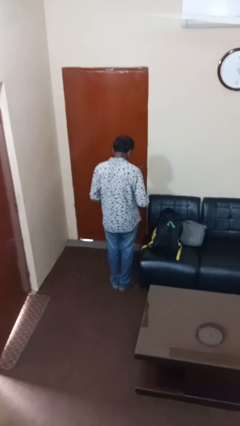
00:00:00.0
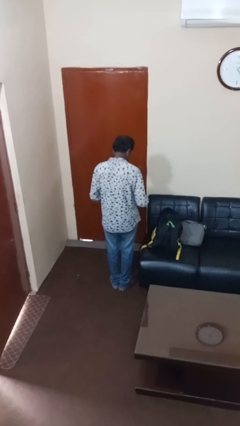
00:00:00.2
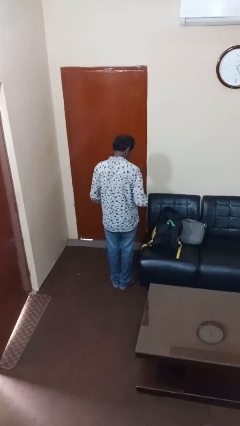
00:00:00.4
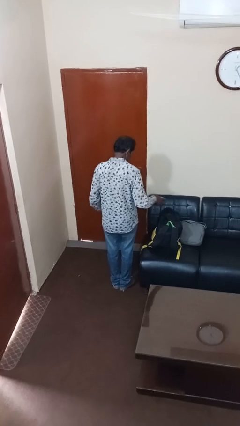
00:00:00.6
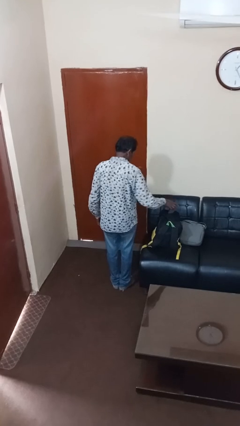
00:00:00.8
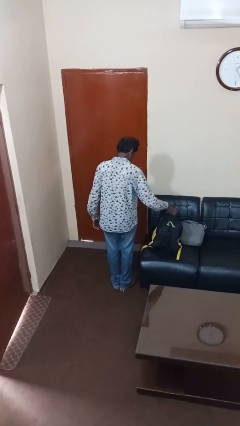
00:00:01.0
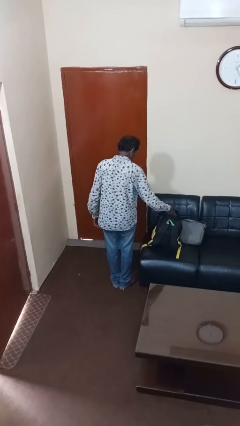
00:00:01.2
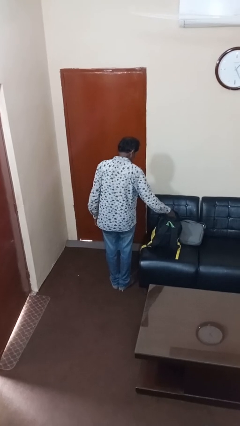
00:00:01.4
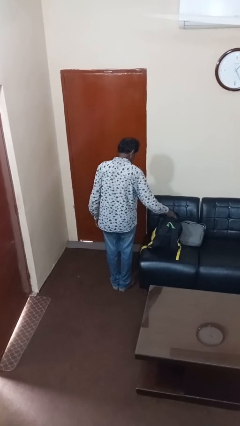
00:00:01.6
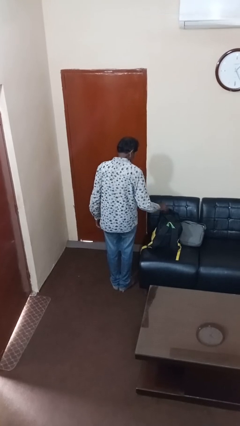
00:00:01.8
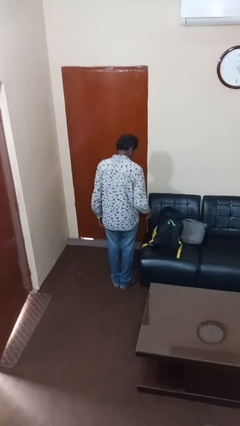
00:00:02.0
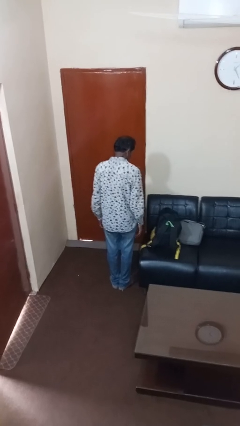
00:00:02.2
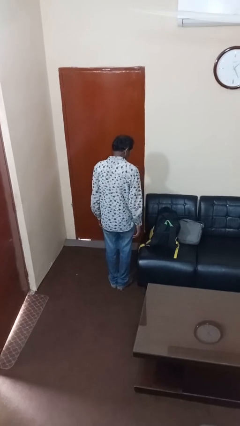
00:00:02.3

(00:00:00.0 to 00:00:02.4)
person puts object into backpack

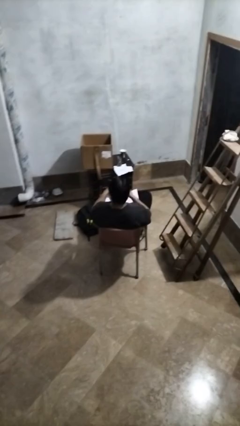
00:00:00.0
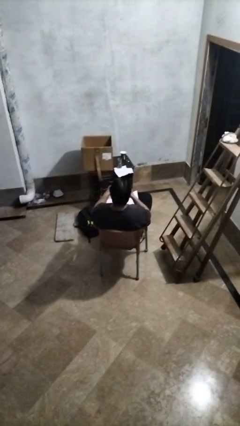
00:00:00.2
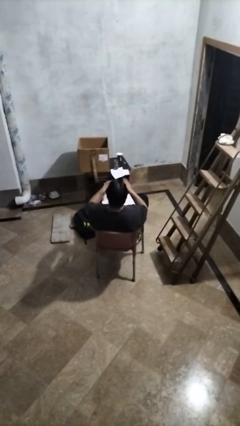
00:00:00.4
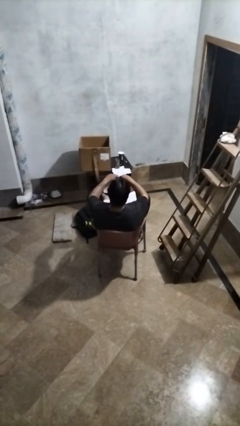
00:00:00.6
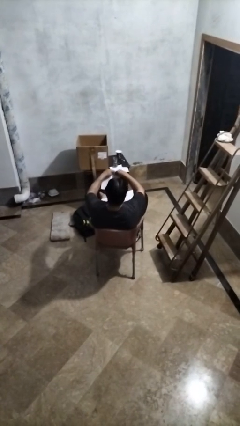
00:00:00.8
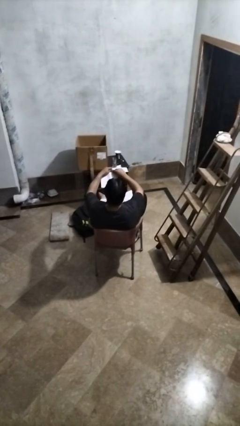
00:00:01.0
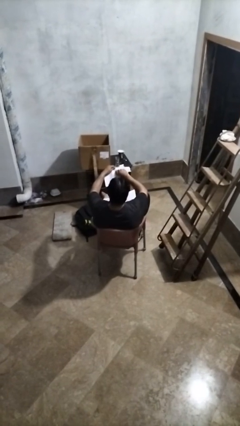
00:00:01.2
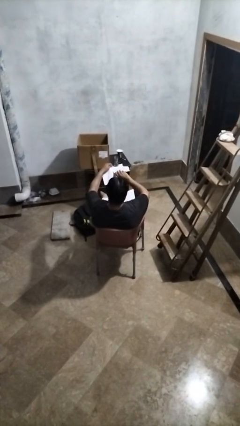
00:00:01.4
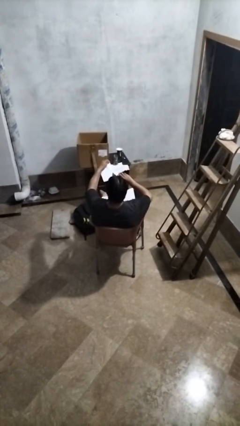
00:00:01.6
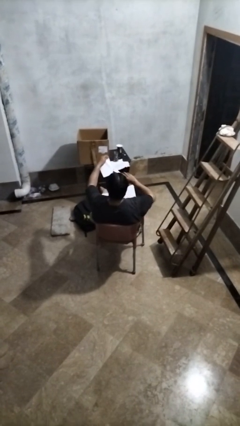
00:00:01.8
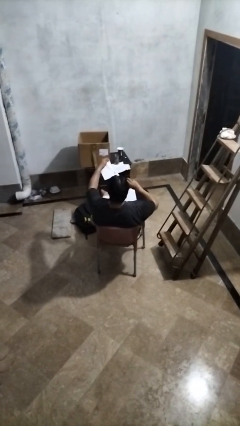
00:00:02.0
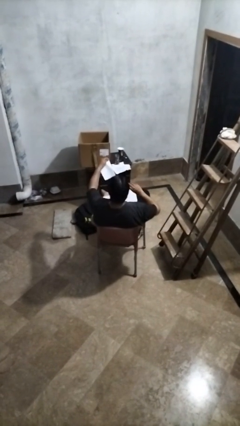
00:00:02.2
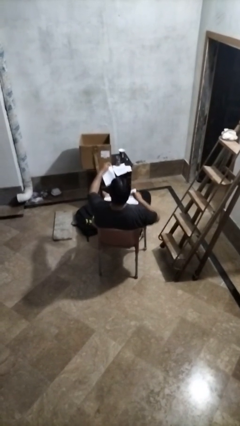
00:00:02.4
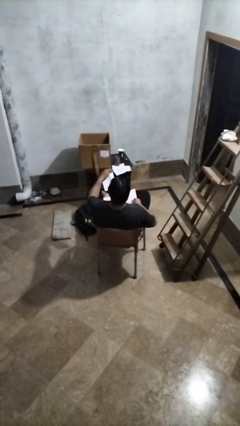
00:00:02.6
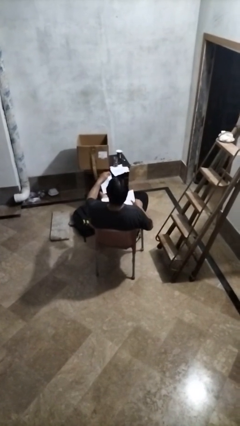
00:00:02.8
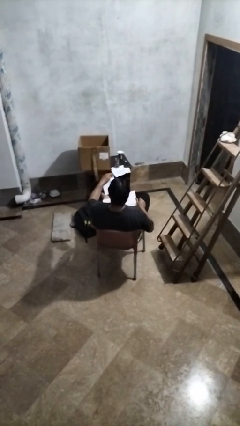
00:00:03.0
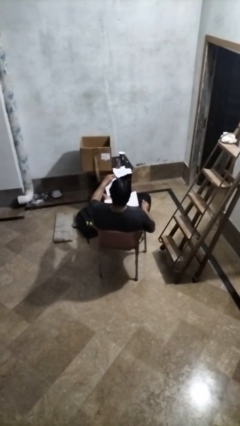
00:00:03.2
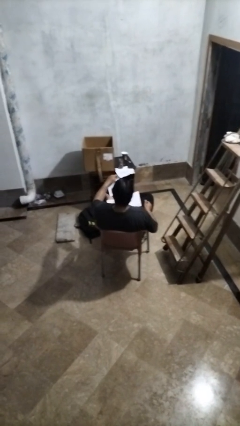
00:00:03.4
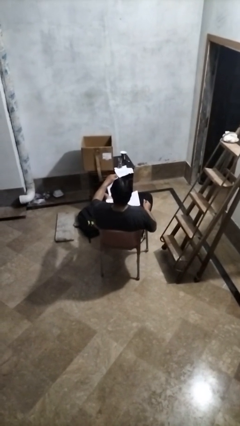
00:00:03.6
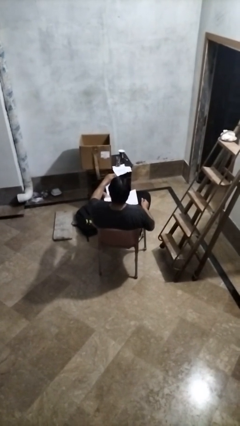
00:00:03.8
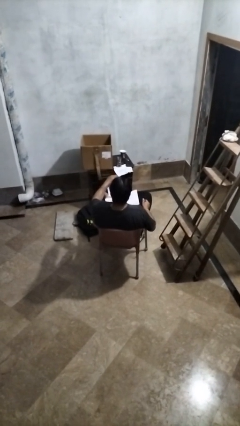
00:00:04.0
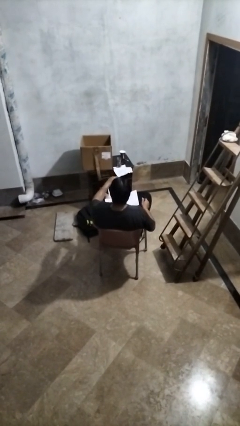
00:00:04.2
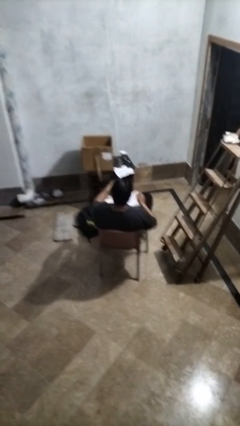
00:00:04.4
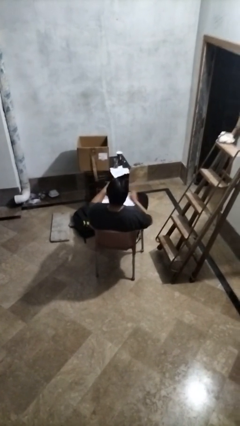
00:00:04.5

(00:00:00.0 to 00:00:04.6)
person tears paper

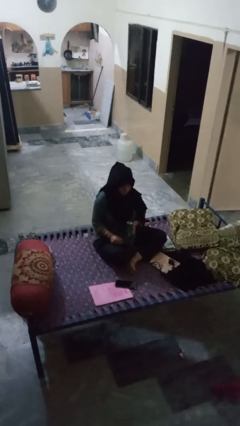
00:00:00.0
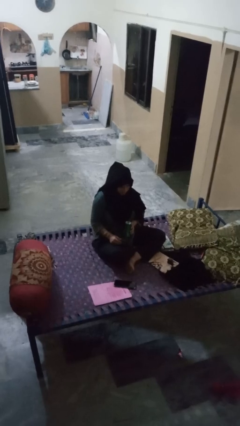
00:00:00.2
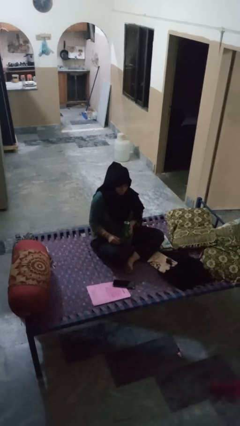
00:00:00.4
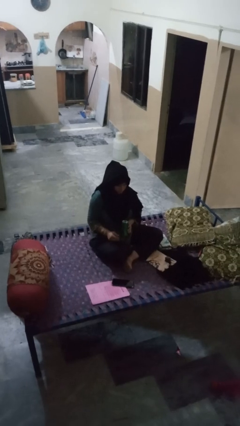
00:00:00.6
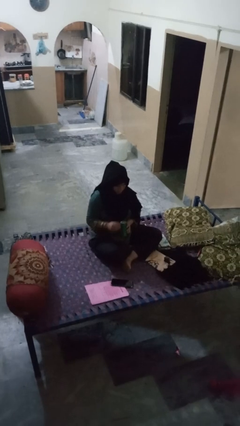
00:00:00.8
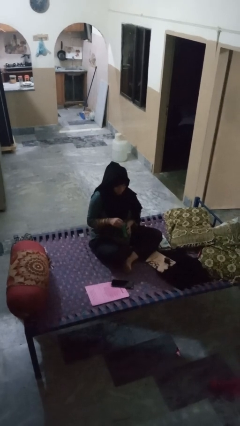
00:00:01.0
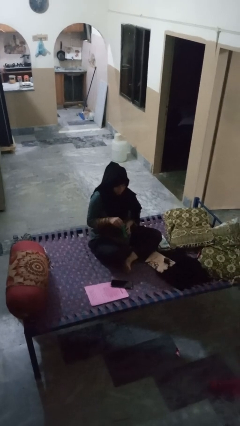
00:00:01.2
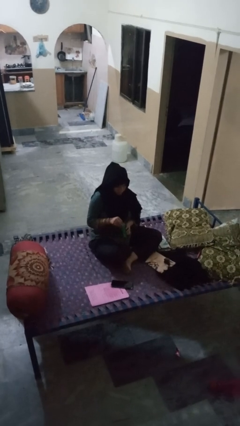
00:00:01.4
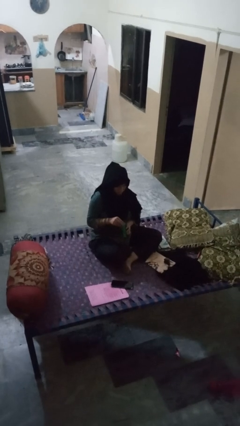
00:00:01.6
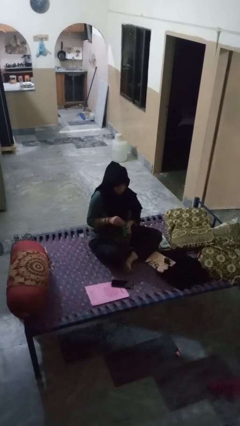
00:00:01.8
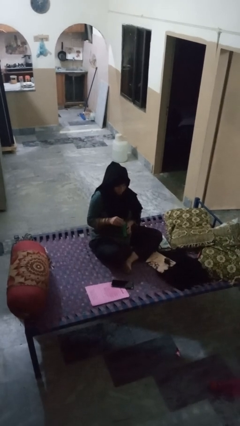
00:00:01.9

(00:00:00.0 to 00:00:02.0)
person opens can with can opener

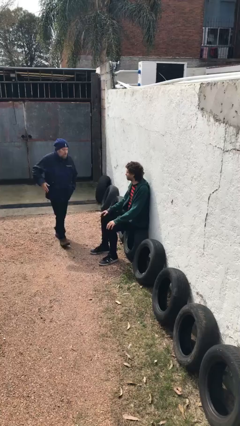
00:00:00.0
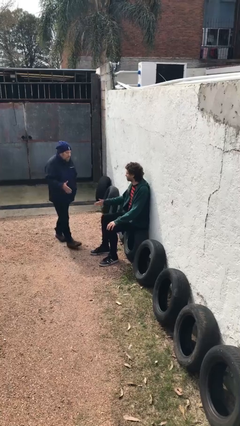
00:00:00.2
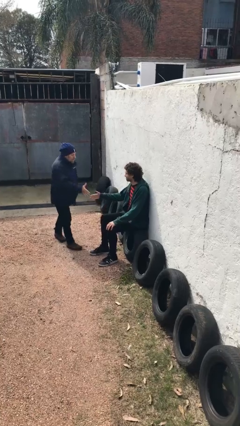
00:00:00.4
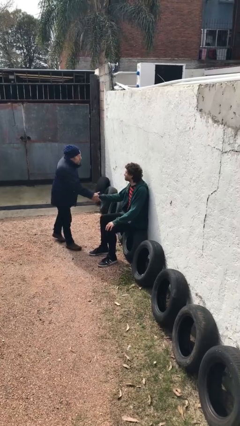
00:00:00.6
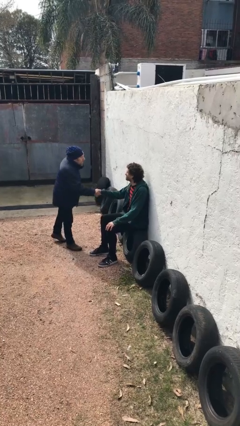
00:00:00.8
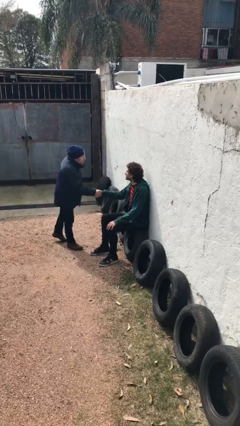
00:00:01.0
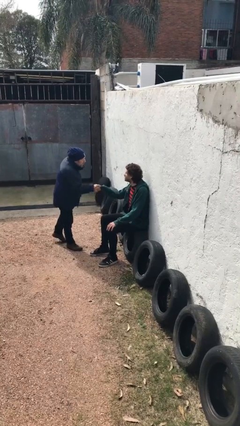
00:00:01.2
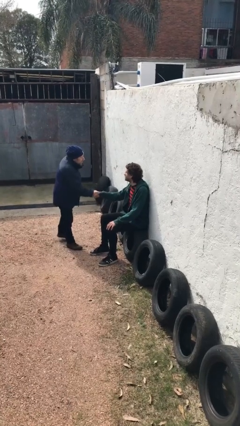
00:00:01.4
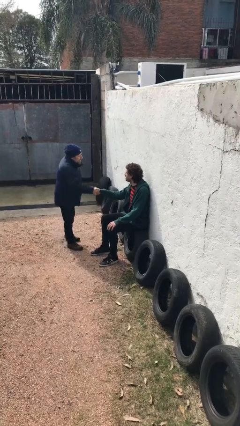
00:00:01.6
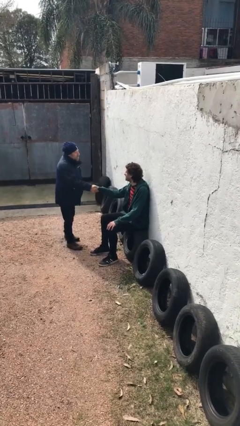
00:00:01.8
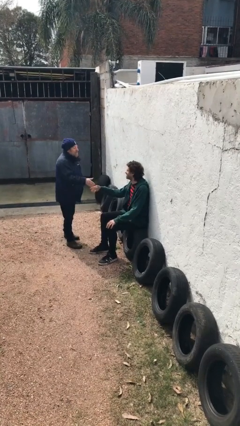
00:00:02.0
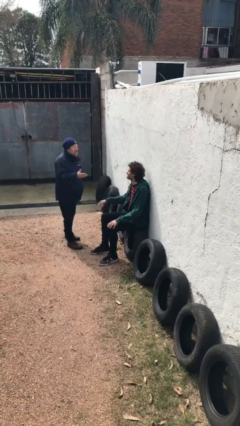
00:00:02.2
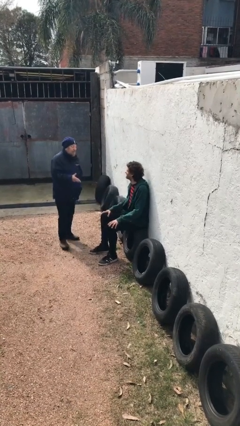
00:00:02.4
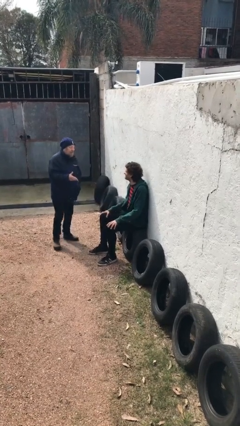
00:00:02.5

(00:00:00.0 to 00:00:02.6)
person shakes hand

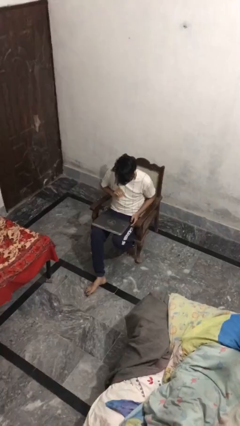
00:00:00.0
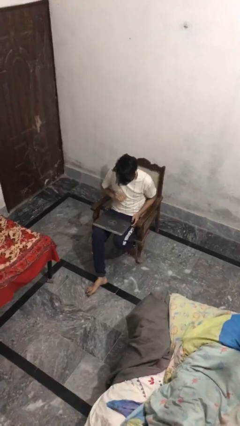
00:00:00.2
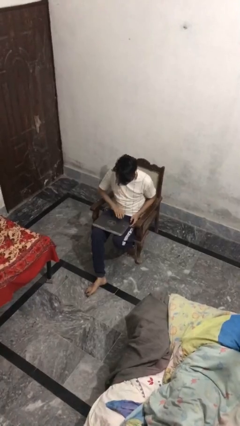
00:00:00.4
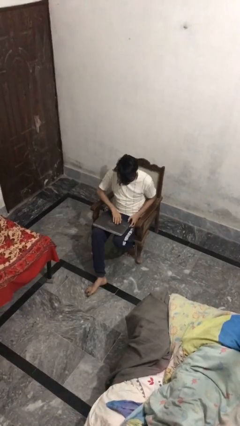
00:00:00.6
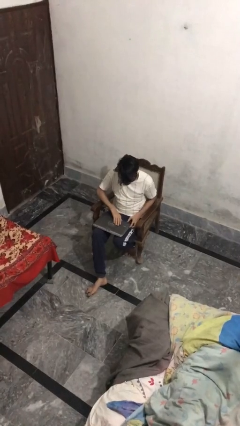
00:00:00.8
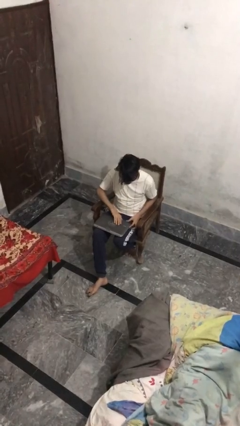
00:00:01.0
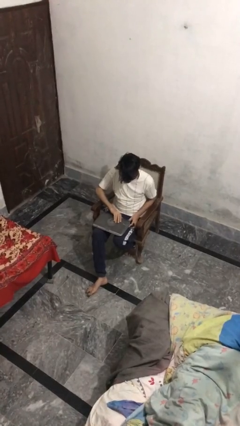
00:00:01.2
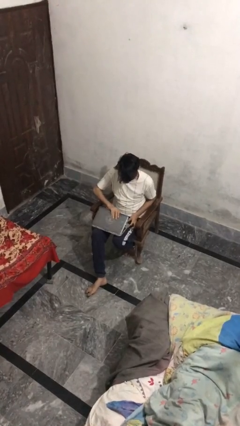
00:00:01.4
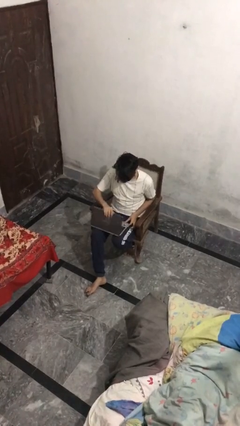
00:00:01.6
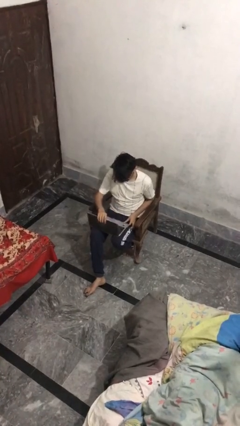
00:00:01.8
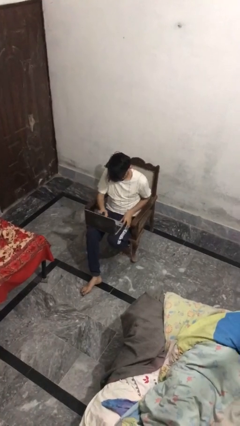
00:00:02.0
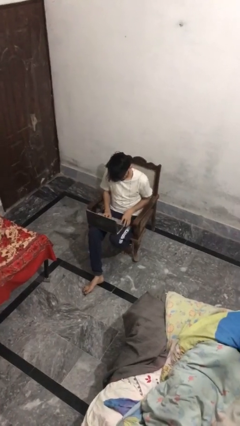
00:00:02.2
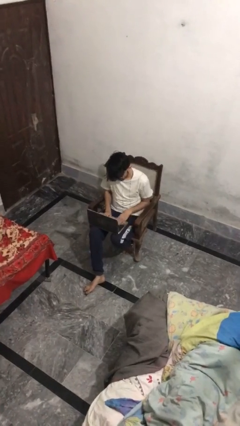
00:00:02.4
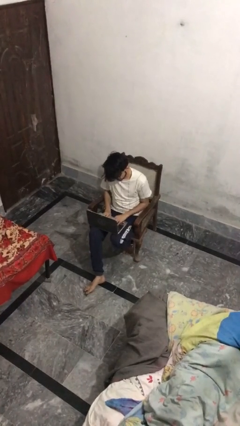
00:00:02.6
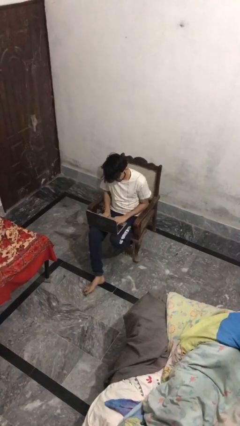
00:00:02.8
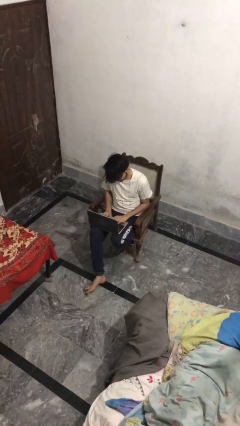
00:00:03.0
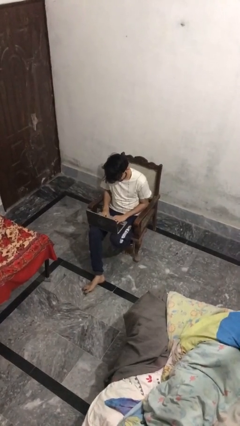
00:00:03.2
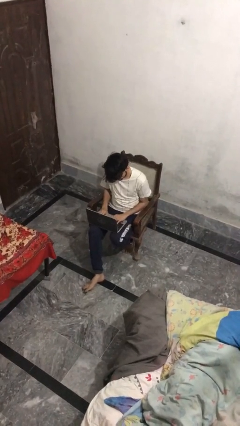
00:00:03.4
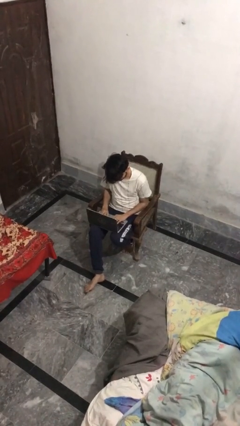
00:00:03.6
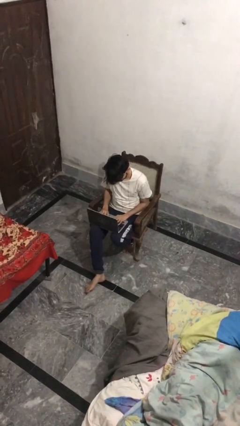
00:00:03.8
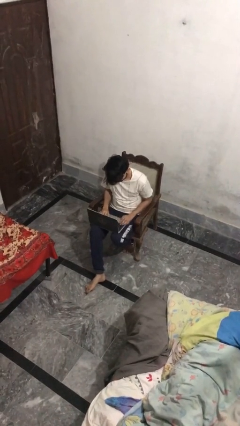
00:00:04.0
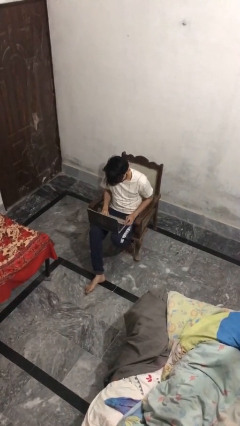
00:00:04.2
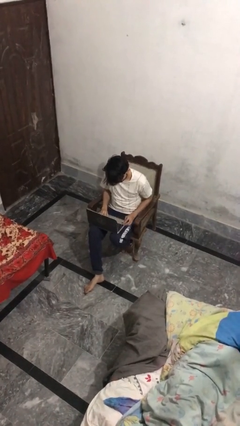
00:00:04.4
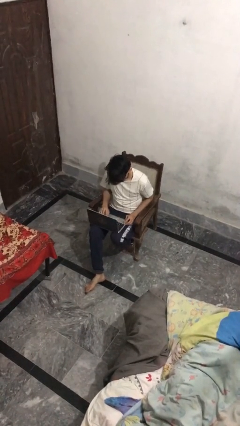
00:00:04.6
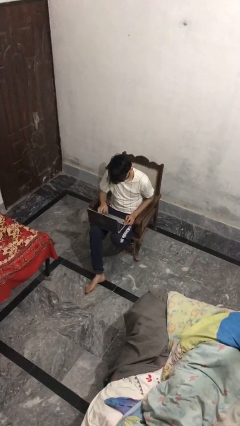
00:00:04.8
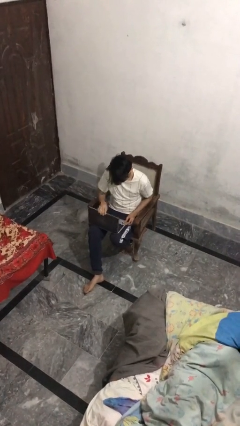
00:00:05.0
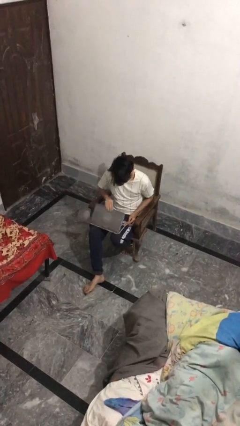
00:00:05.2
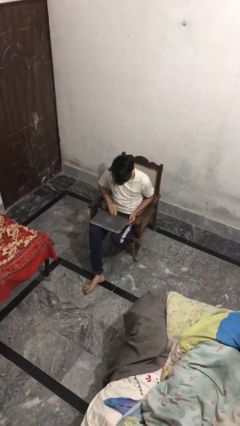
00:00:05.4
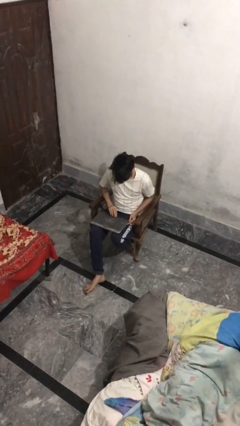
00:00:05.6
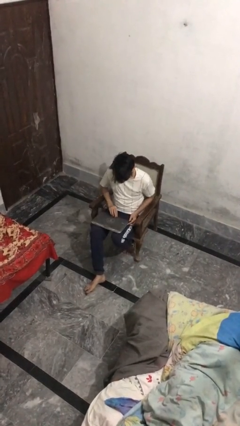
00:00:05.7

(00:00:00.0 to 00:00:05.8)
person interacts with laptop
